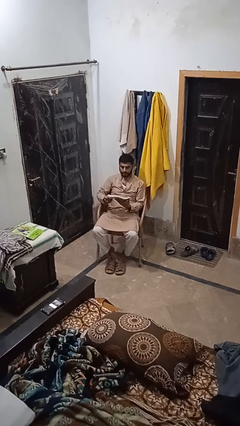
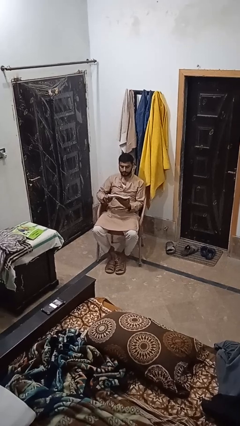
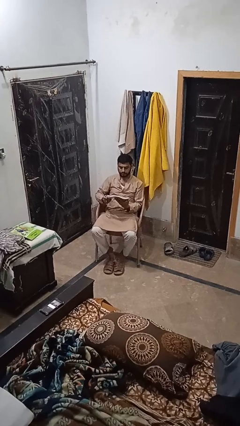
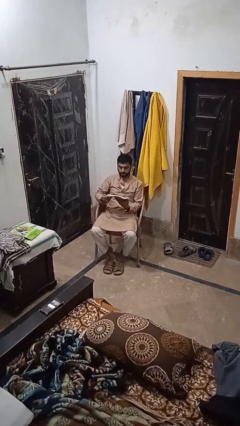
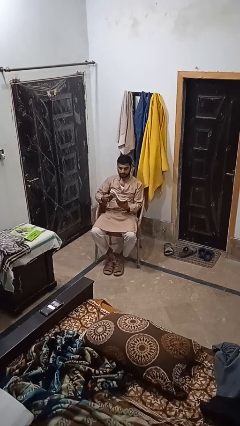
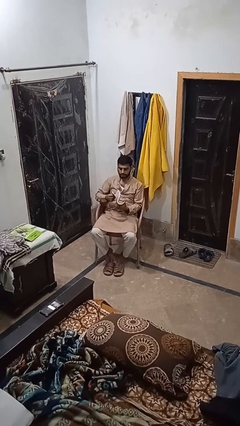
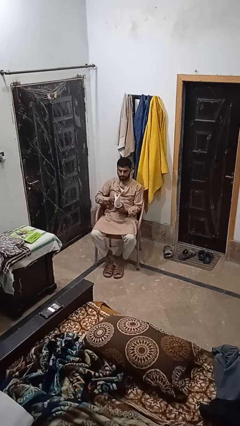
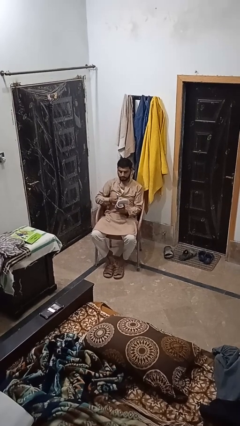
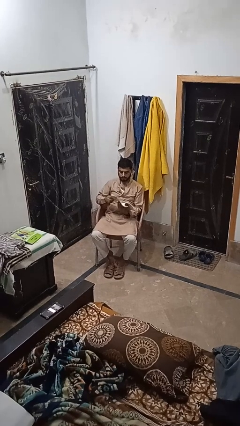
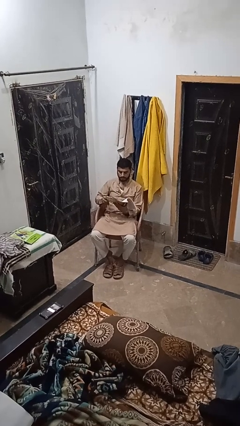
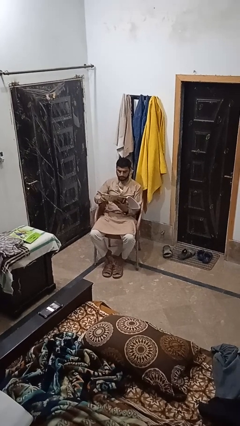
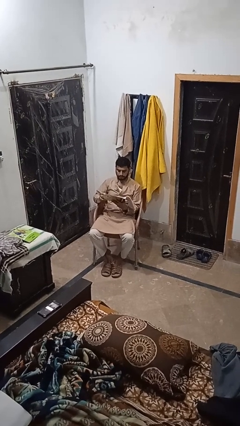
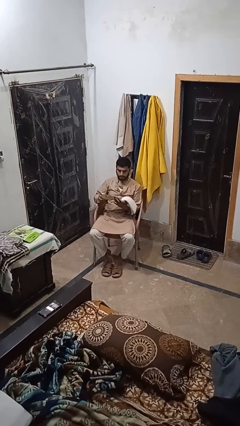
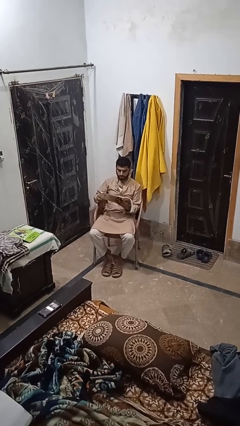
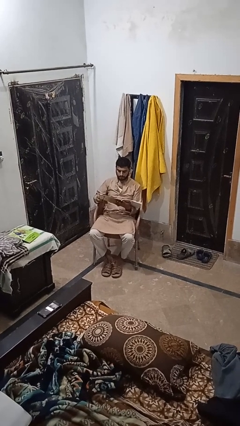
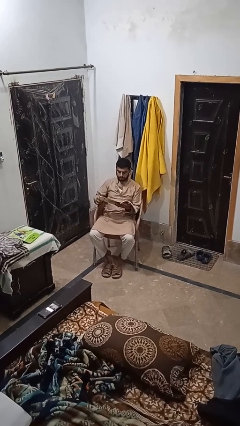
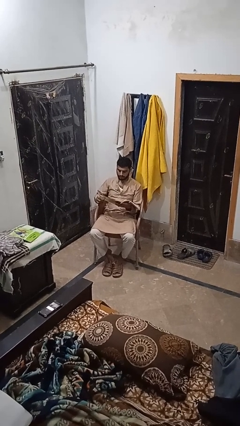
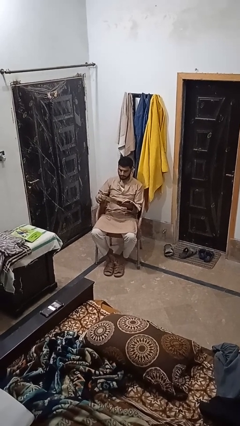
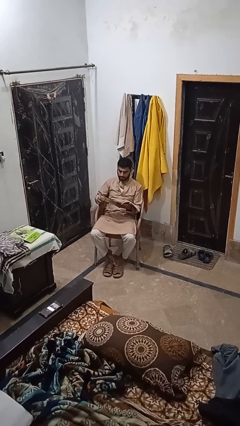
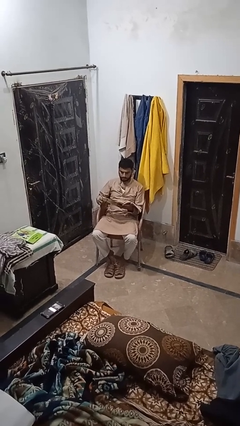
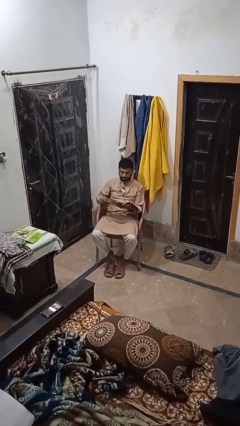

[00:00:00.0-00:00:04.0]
person reads book

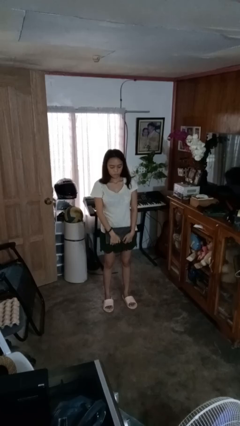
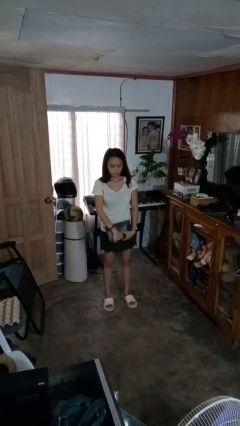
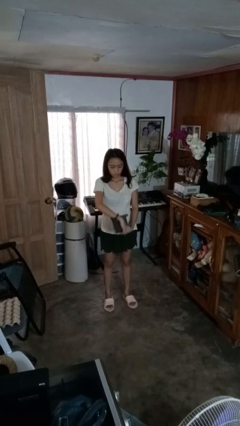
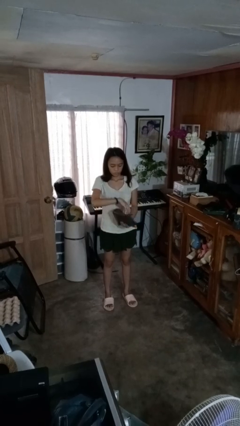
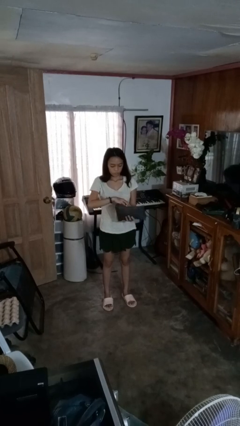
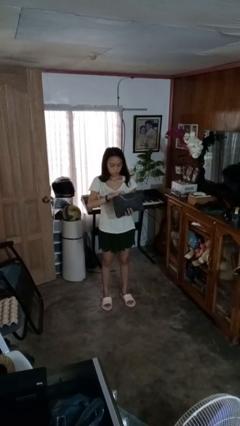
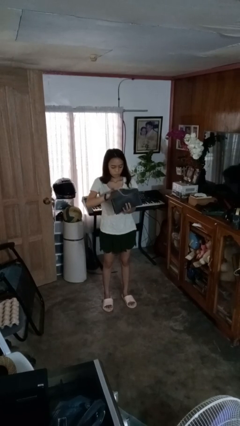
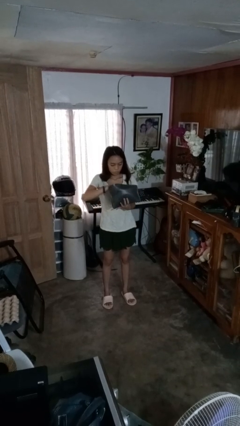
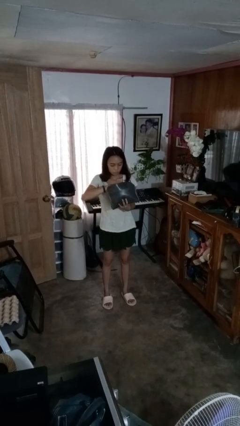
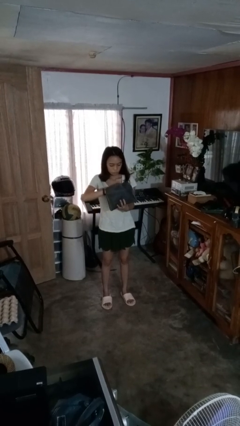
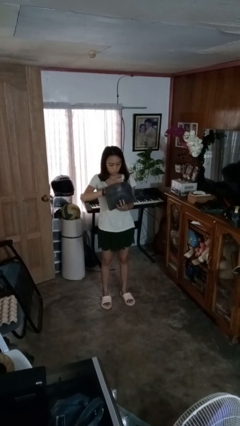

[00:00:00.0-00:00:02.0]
person searches in purse

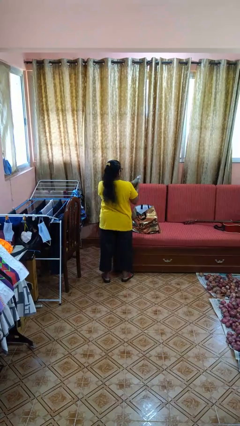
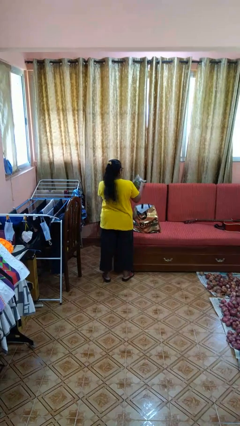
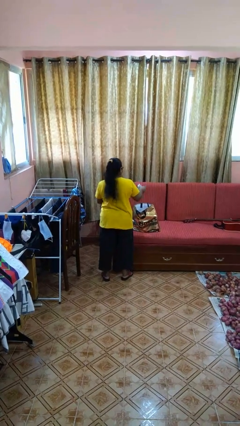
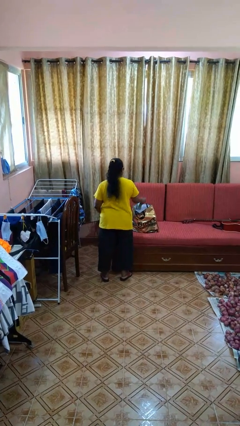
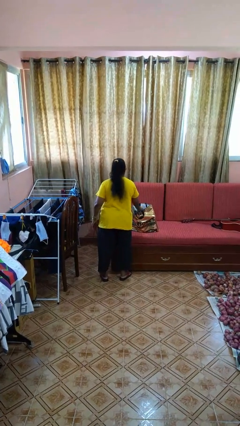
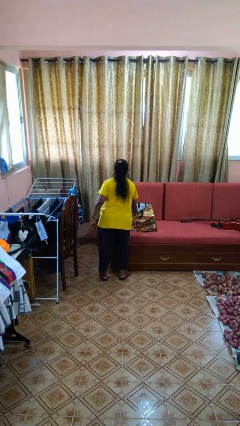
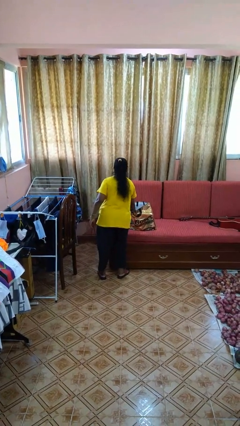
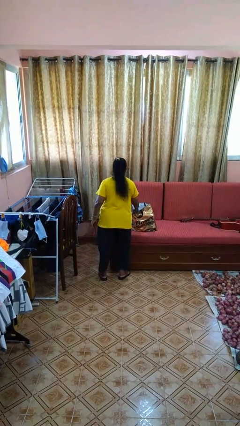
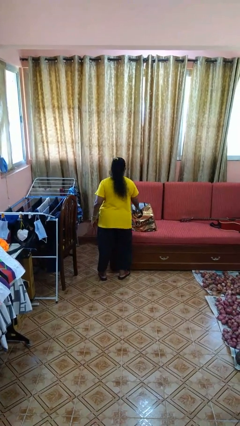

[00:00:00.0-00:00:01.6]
person puts object into bag

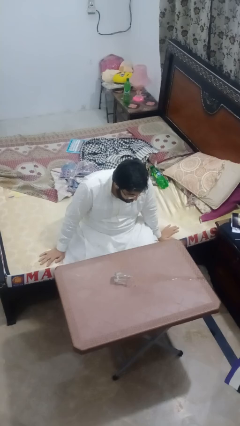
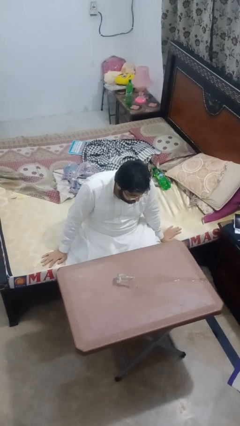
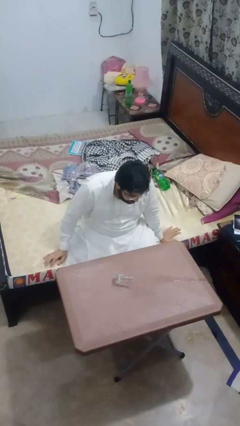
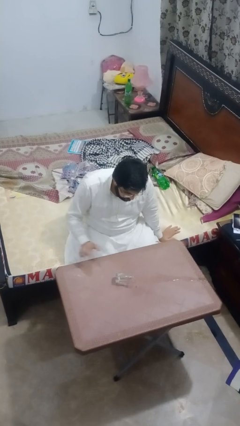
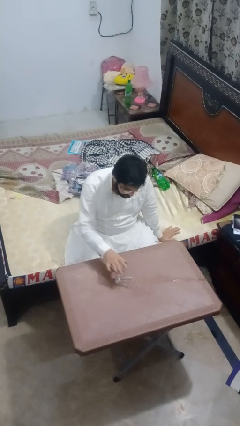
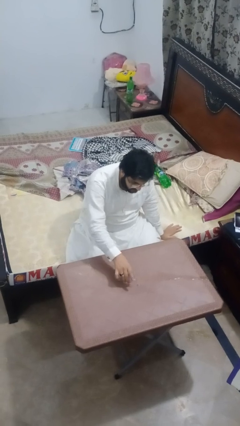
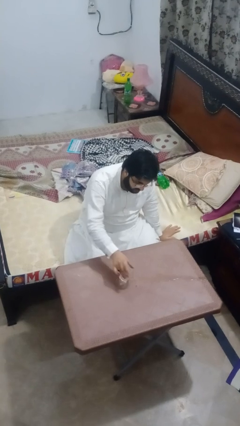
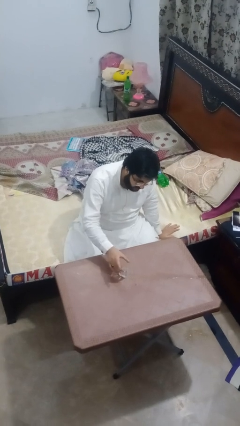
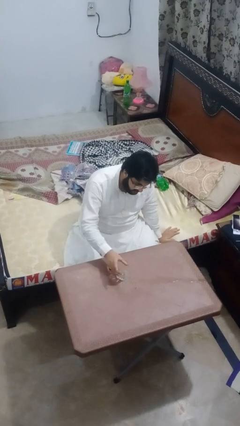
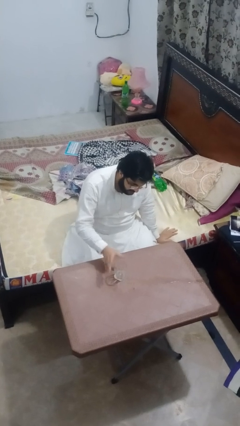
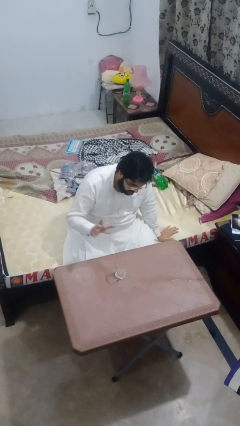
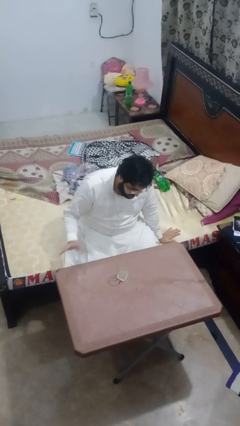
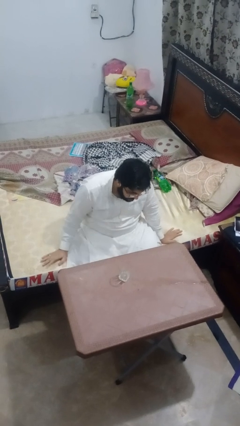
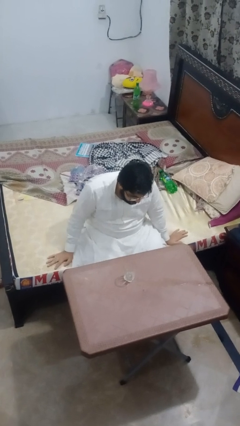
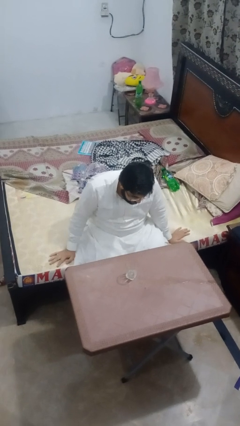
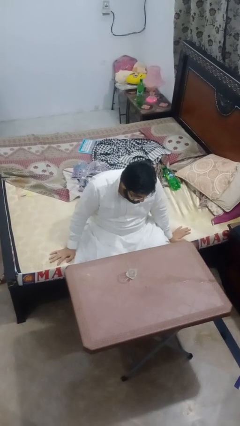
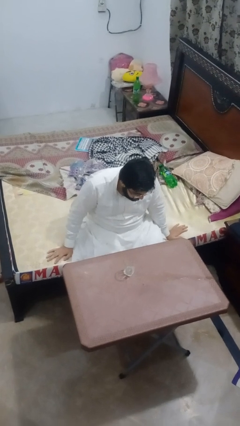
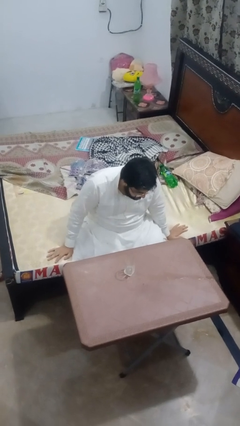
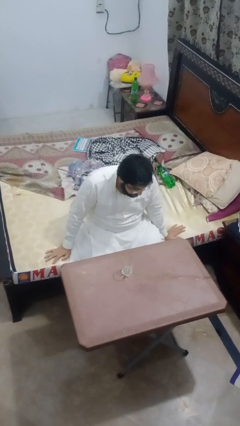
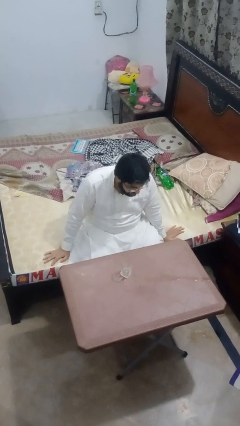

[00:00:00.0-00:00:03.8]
person sets upright glass

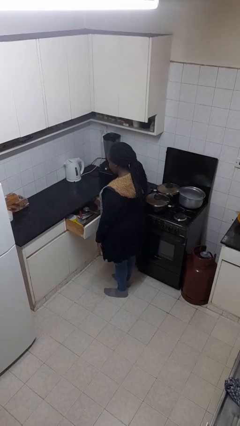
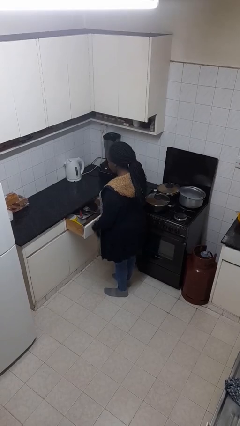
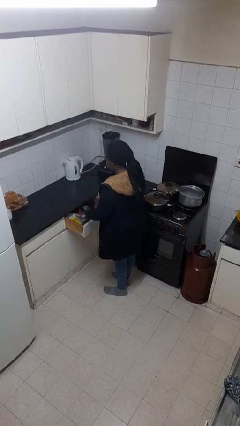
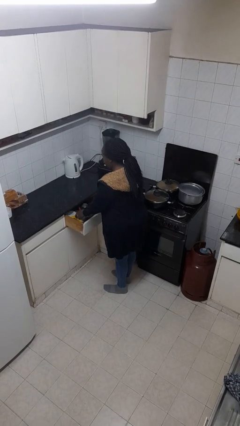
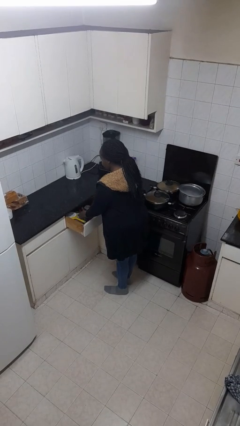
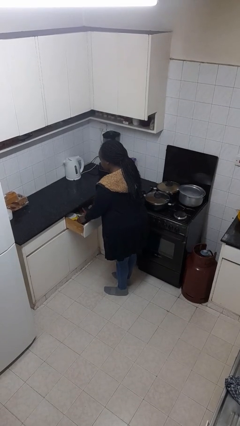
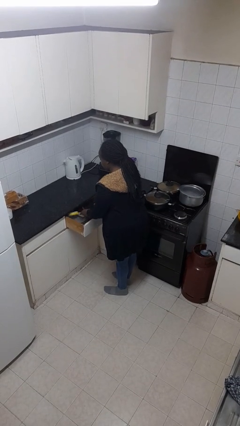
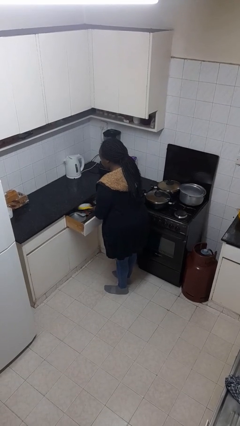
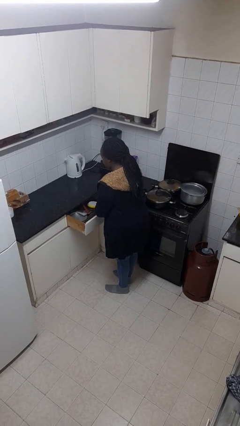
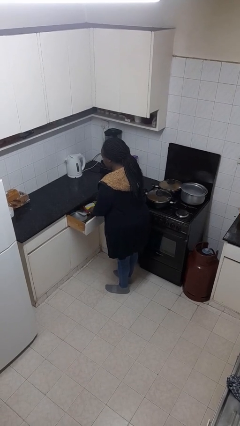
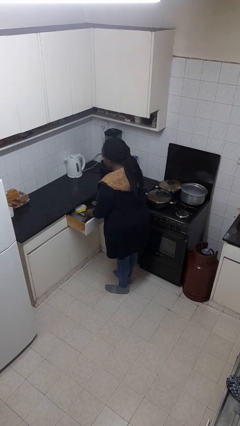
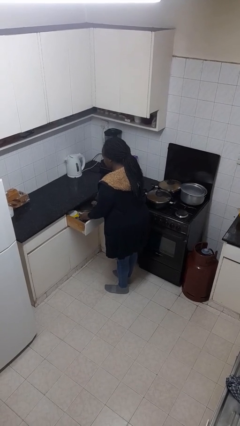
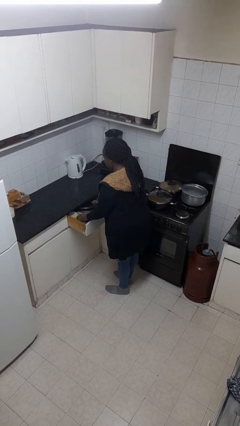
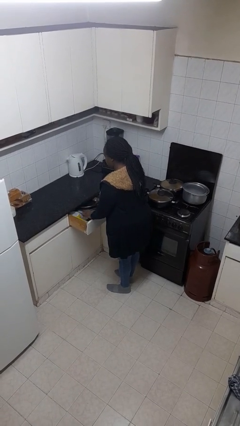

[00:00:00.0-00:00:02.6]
person searches in kitchen drawer

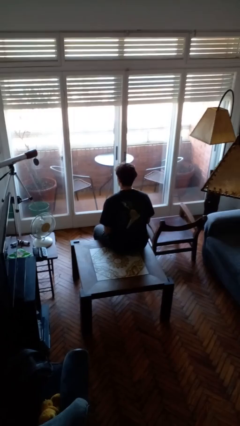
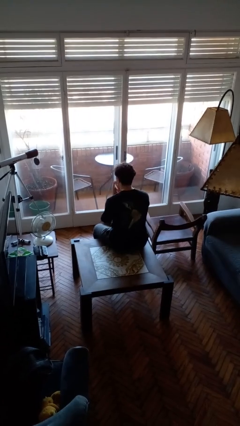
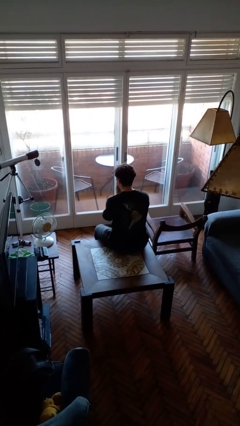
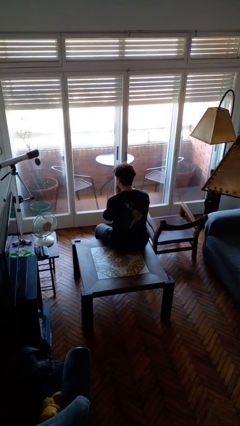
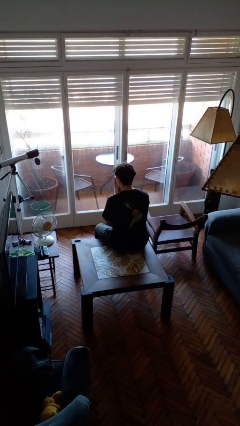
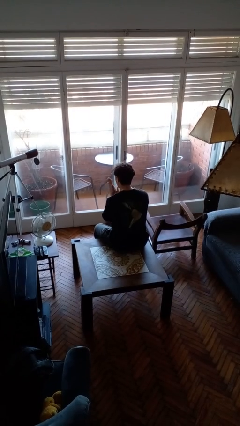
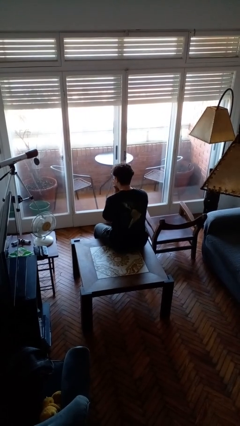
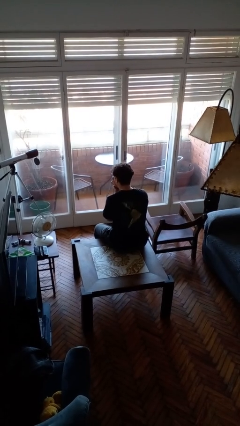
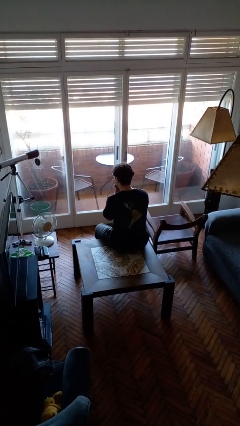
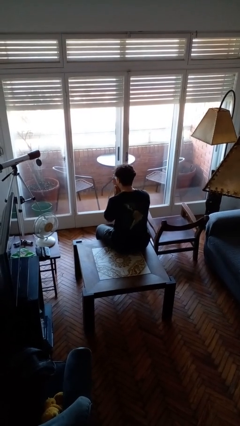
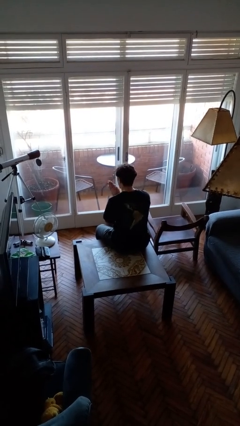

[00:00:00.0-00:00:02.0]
person blows into hands

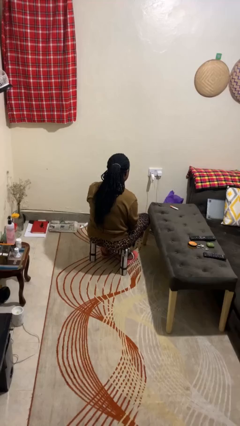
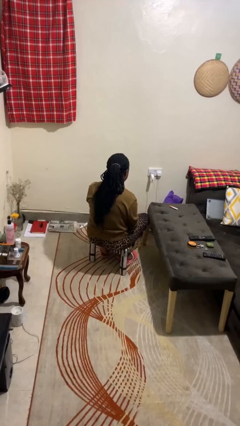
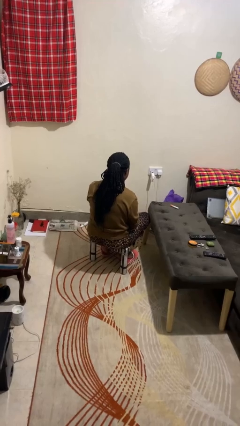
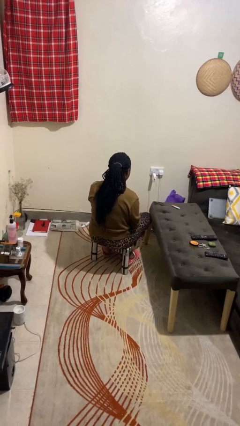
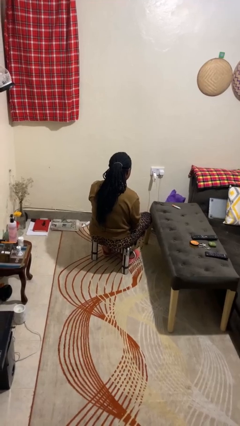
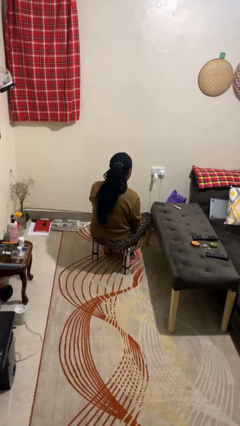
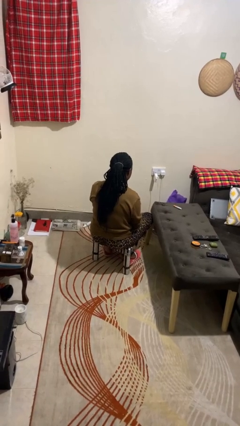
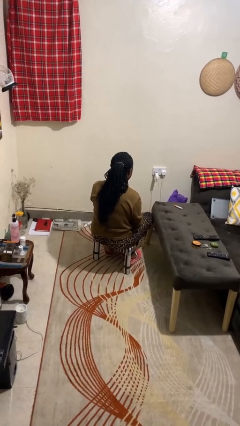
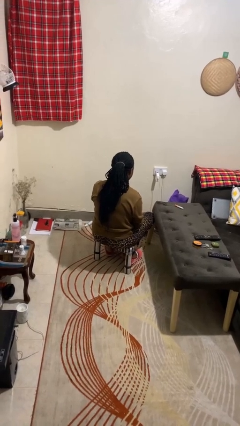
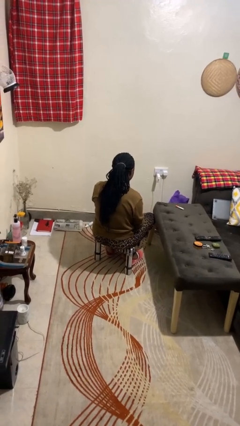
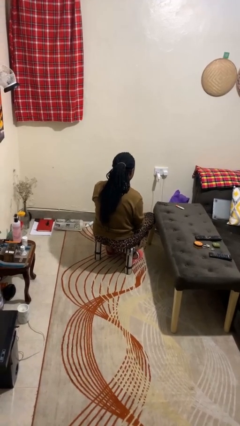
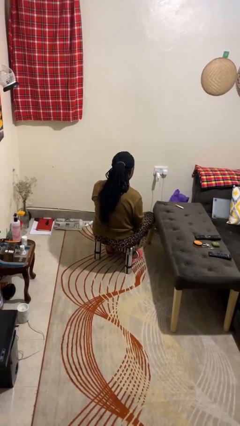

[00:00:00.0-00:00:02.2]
person salutes
